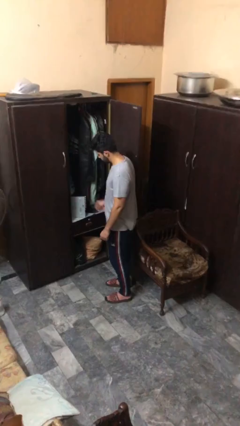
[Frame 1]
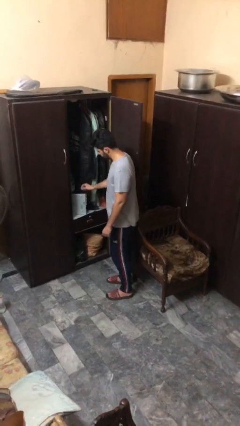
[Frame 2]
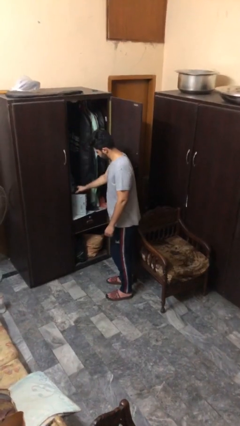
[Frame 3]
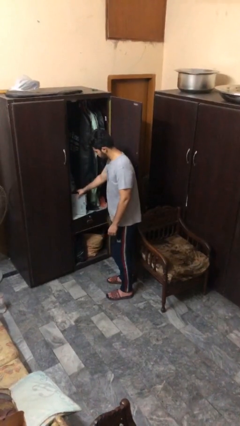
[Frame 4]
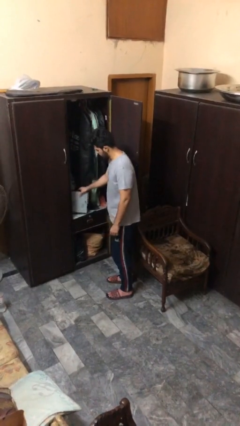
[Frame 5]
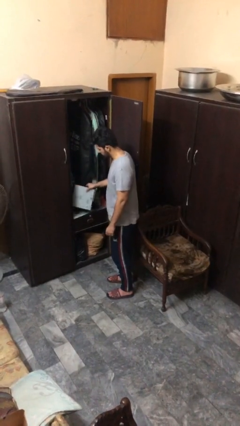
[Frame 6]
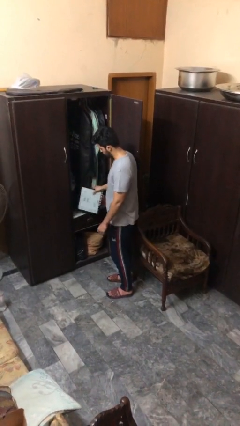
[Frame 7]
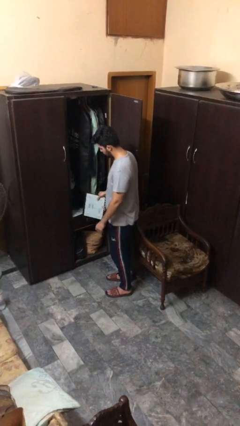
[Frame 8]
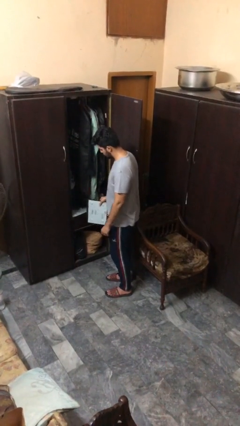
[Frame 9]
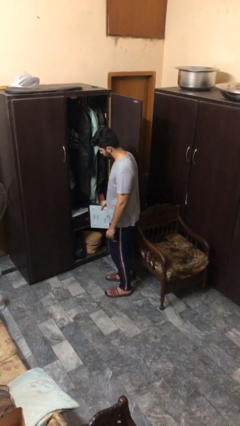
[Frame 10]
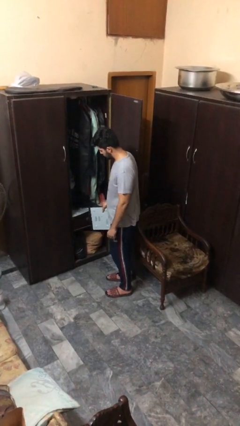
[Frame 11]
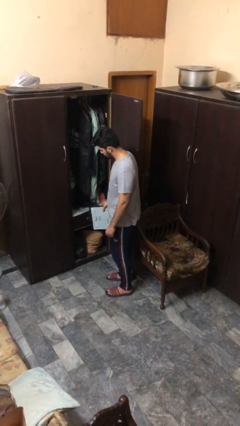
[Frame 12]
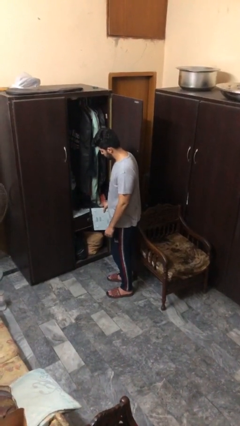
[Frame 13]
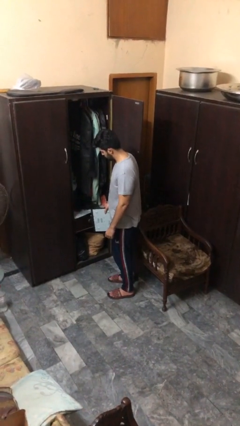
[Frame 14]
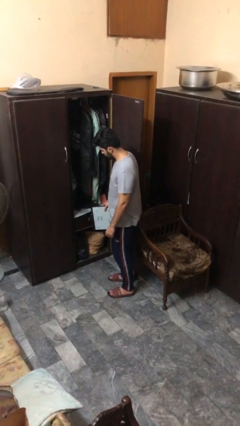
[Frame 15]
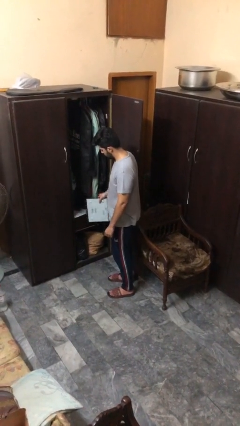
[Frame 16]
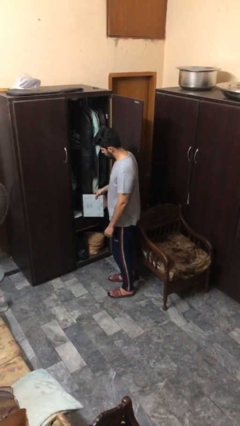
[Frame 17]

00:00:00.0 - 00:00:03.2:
person picks up object from cabinet

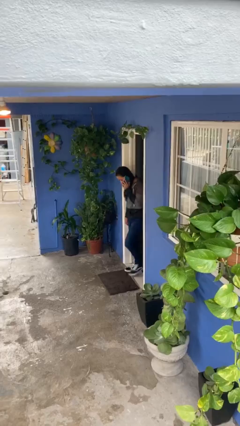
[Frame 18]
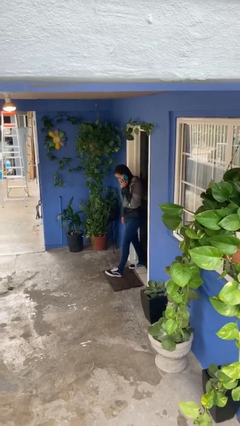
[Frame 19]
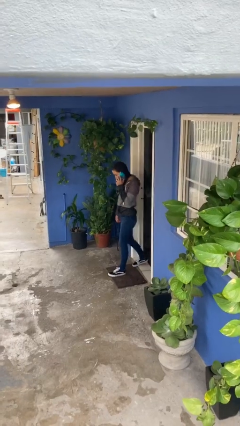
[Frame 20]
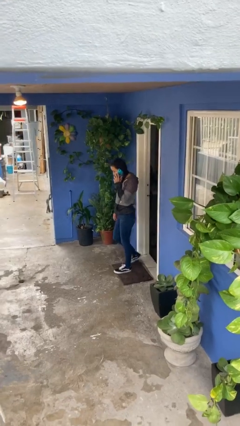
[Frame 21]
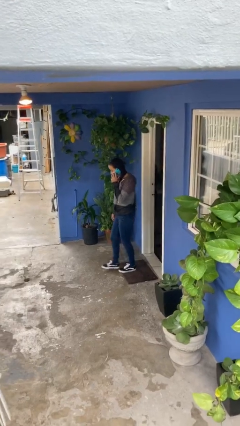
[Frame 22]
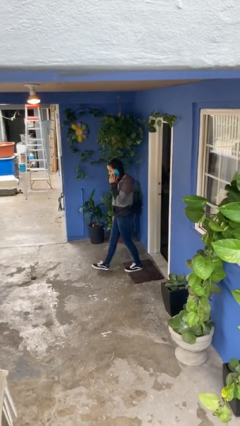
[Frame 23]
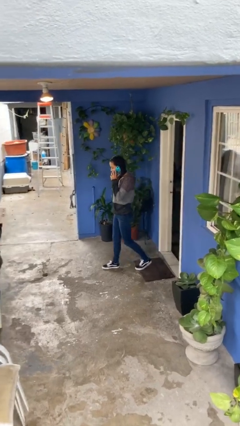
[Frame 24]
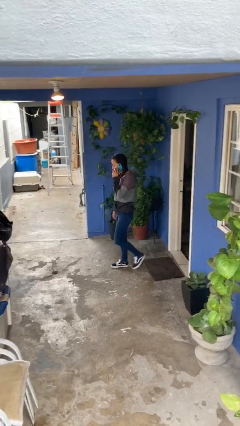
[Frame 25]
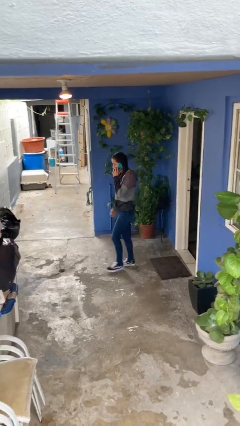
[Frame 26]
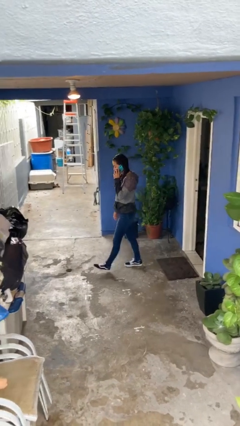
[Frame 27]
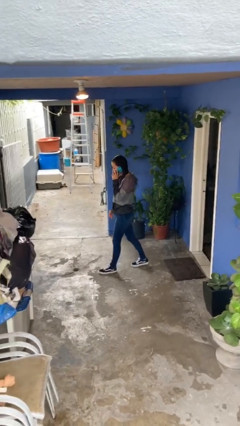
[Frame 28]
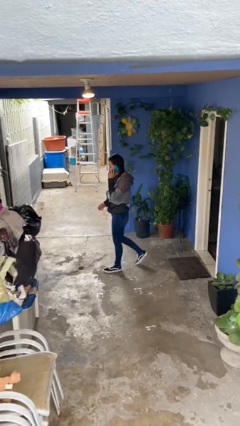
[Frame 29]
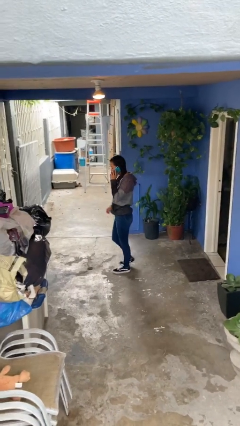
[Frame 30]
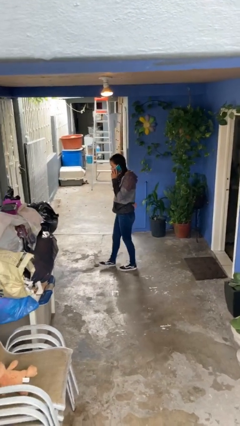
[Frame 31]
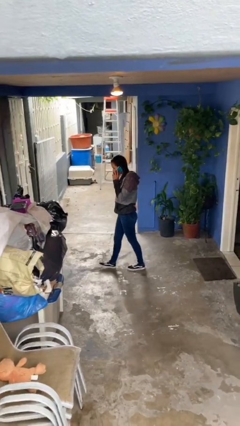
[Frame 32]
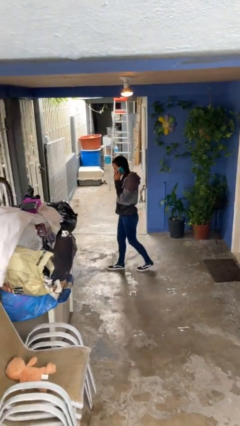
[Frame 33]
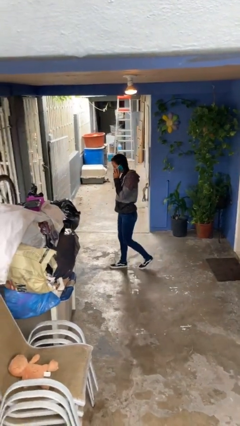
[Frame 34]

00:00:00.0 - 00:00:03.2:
person enters scene through structure

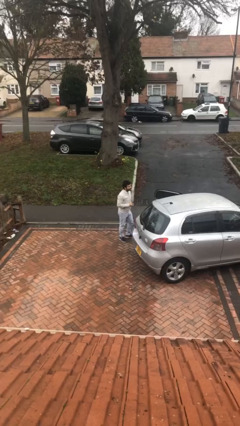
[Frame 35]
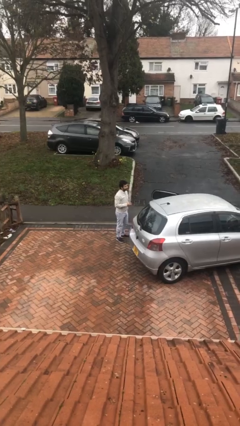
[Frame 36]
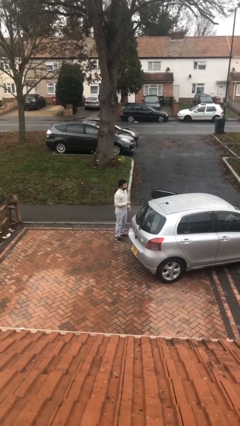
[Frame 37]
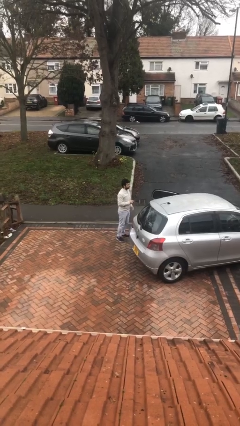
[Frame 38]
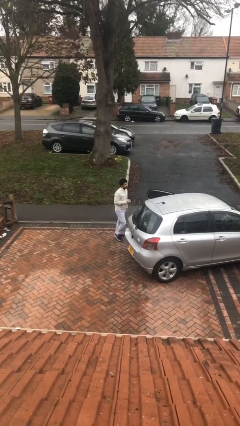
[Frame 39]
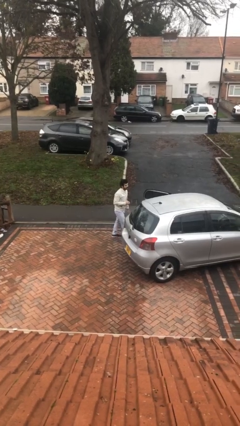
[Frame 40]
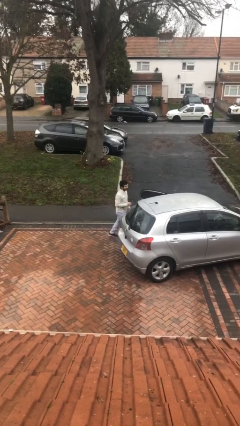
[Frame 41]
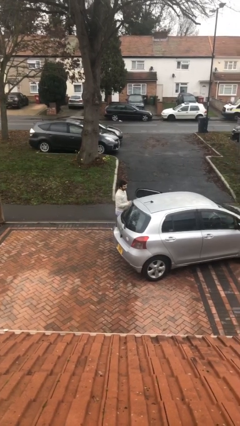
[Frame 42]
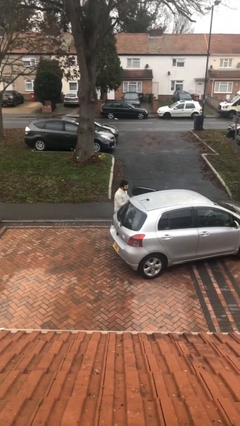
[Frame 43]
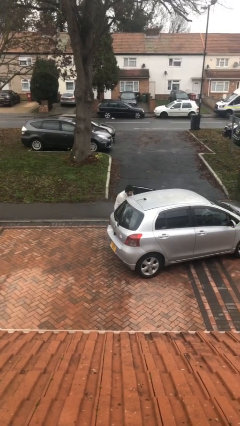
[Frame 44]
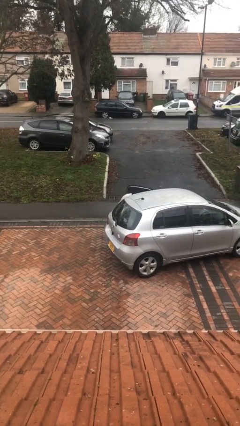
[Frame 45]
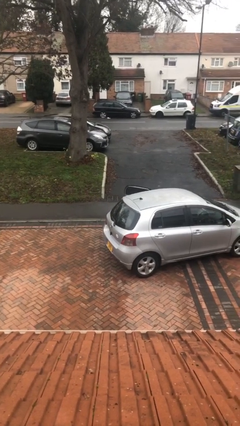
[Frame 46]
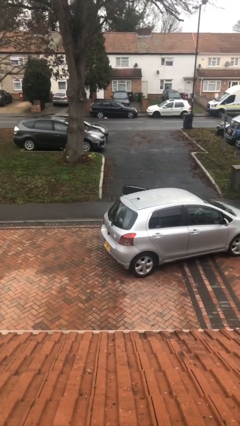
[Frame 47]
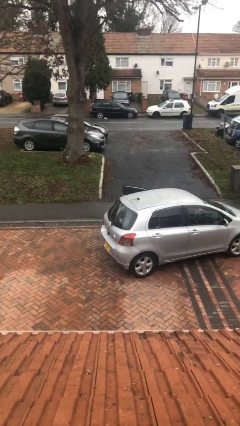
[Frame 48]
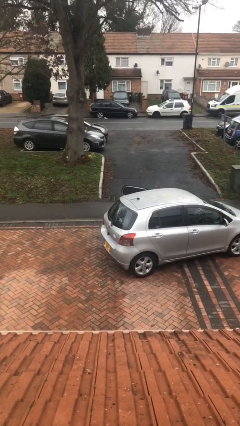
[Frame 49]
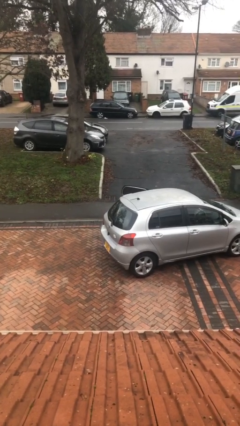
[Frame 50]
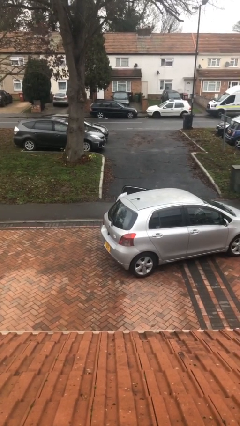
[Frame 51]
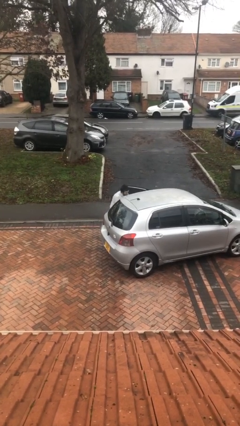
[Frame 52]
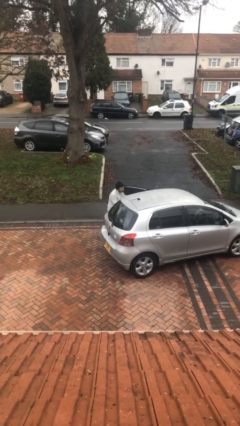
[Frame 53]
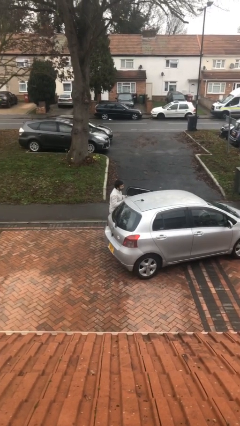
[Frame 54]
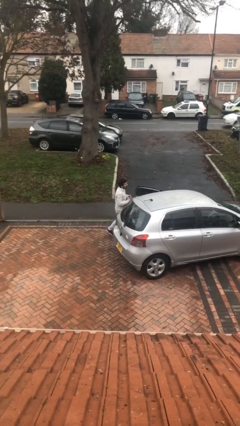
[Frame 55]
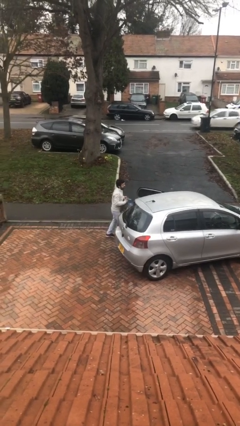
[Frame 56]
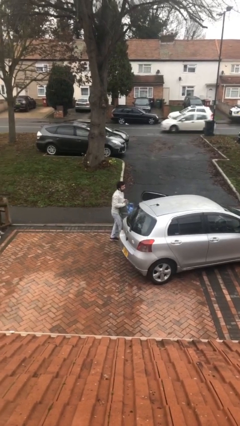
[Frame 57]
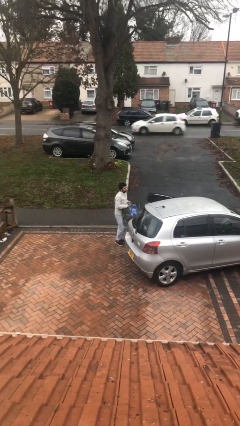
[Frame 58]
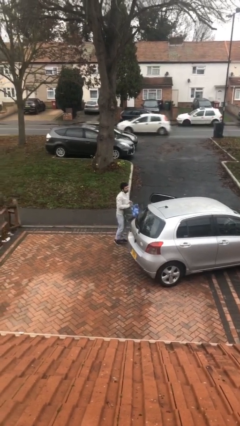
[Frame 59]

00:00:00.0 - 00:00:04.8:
person unloads car

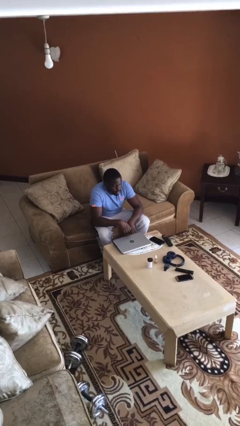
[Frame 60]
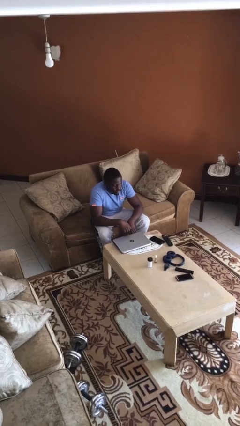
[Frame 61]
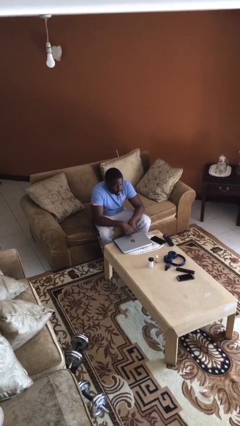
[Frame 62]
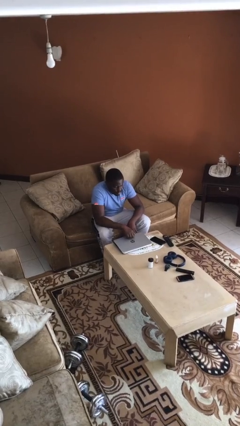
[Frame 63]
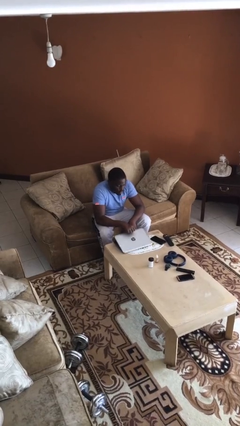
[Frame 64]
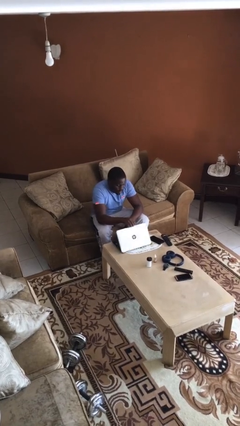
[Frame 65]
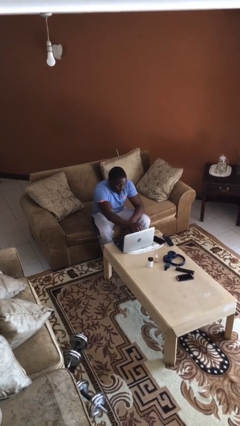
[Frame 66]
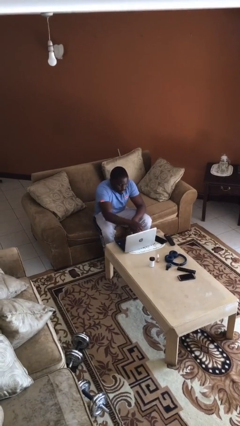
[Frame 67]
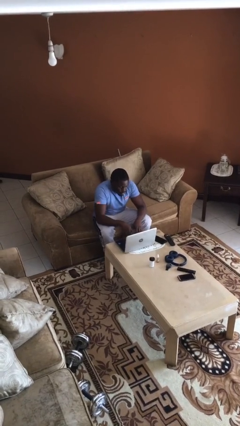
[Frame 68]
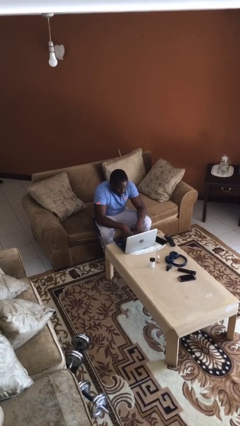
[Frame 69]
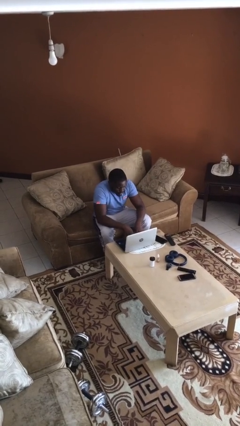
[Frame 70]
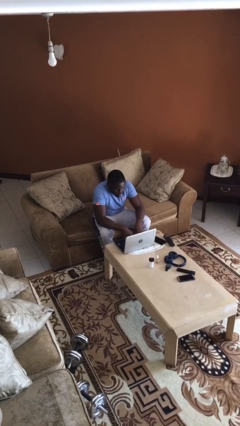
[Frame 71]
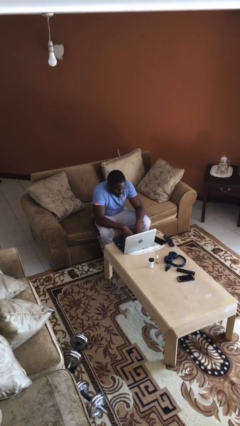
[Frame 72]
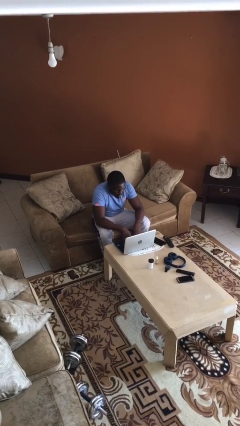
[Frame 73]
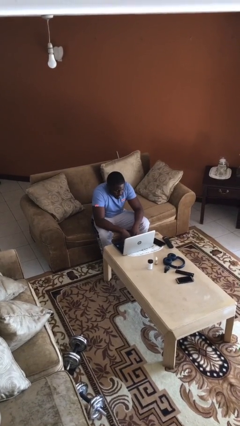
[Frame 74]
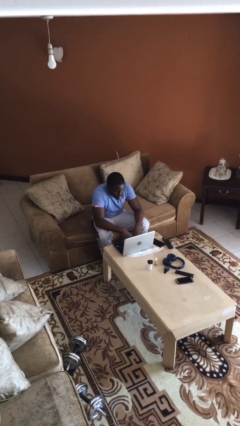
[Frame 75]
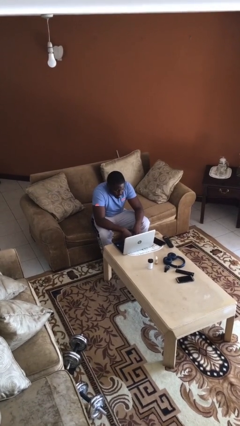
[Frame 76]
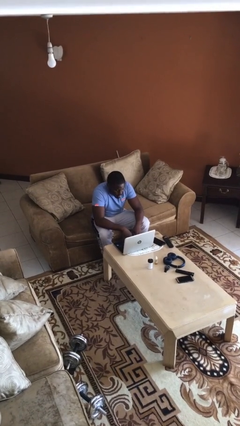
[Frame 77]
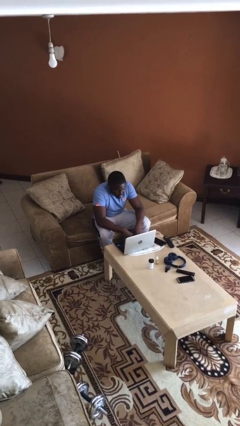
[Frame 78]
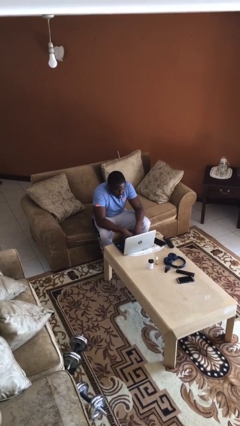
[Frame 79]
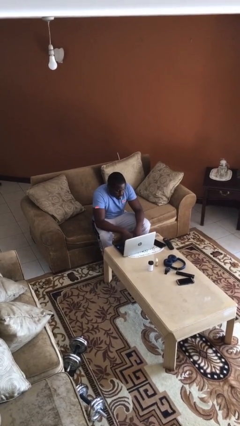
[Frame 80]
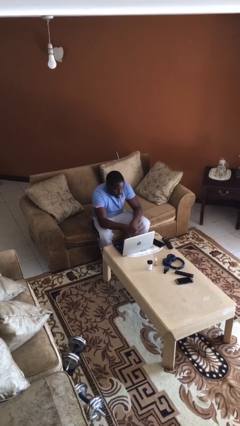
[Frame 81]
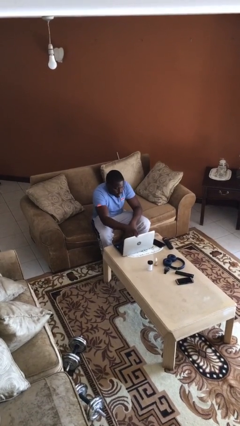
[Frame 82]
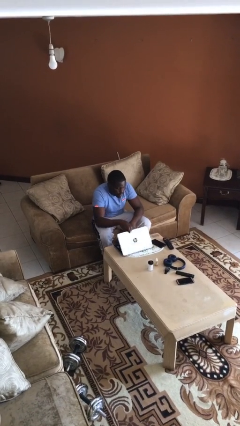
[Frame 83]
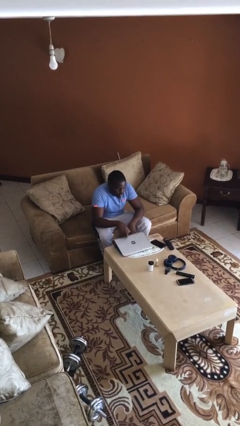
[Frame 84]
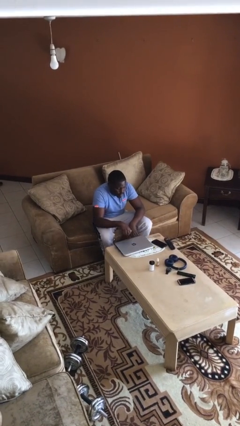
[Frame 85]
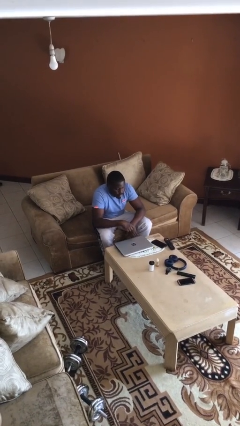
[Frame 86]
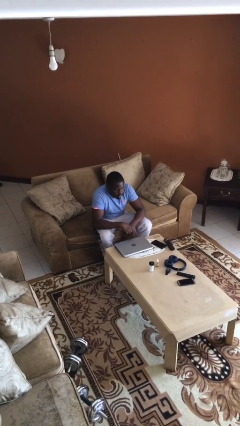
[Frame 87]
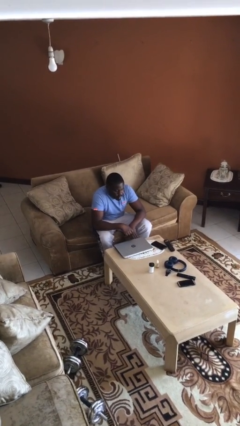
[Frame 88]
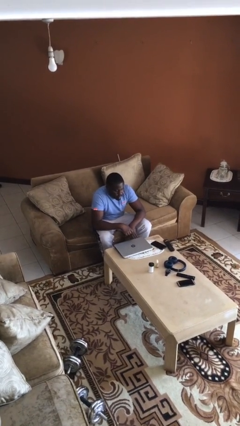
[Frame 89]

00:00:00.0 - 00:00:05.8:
person interacts with laptop

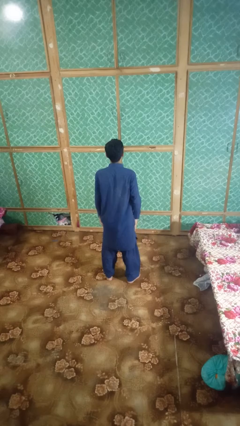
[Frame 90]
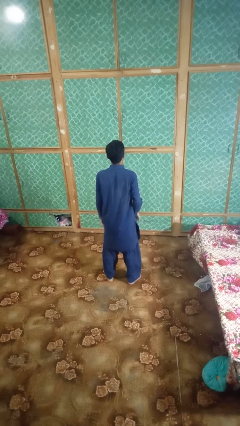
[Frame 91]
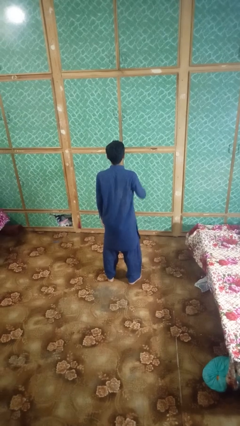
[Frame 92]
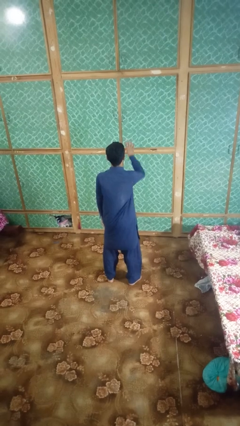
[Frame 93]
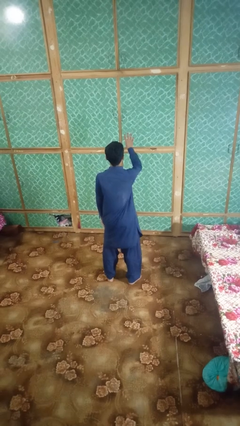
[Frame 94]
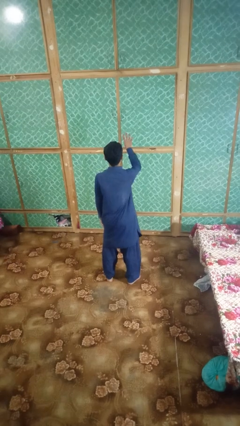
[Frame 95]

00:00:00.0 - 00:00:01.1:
person gestures number four
